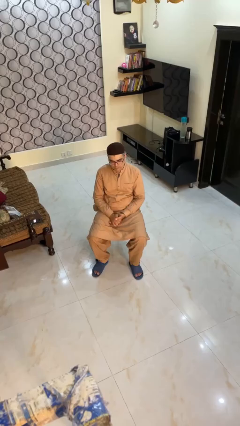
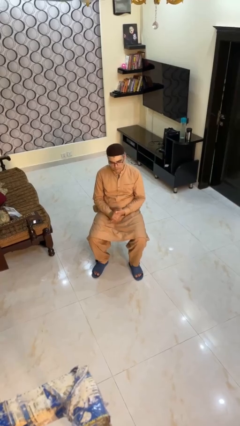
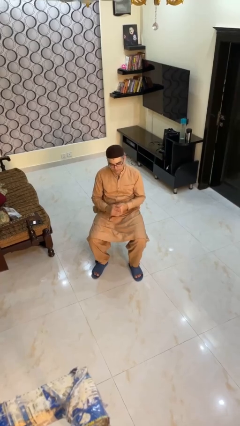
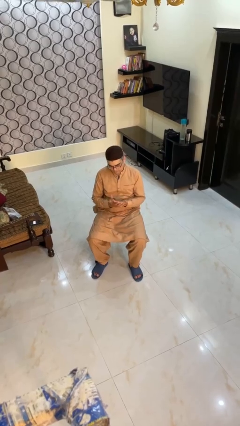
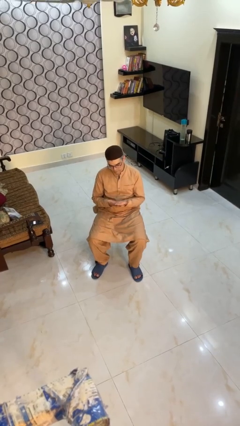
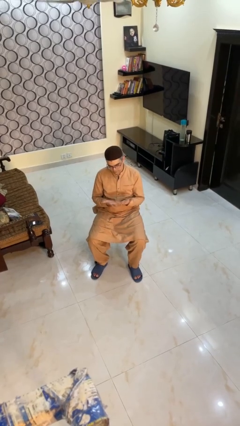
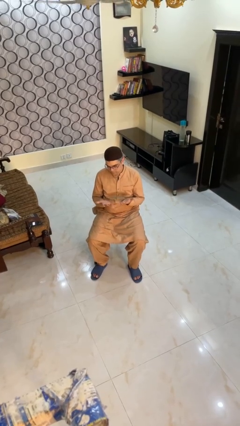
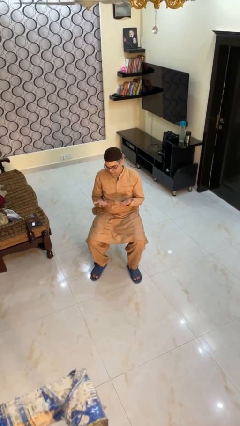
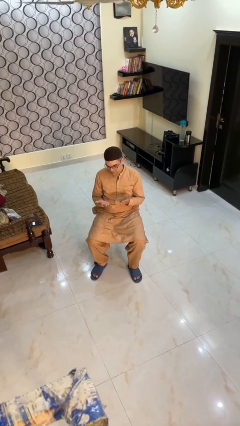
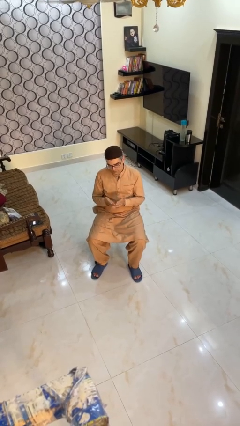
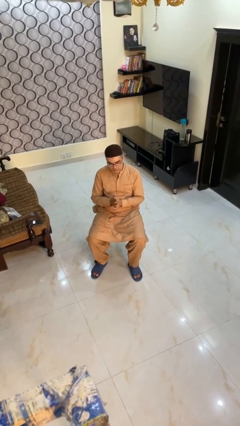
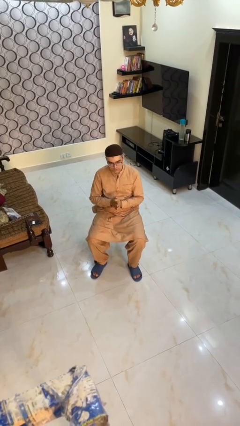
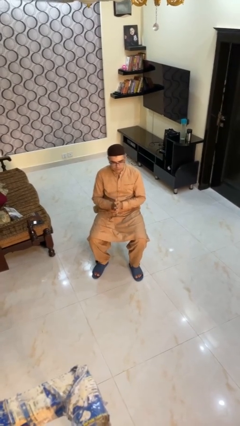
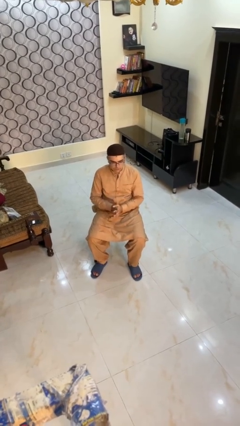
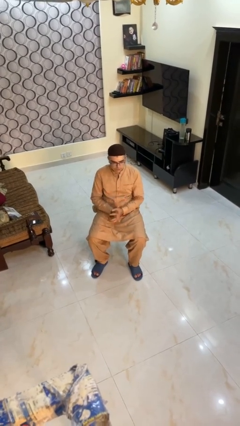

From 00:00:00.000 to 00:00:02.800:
person looks at hands in lap

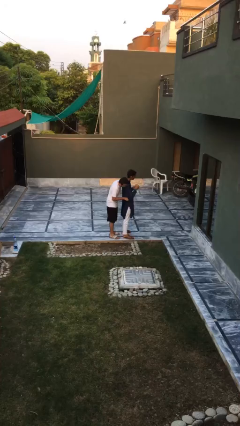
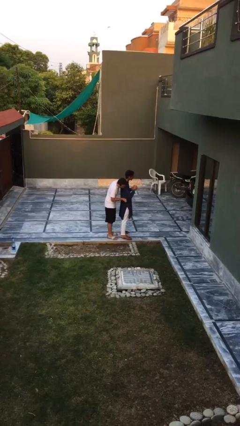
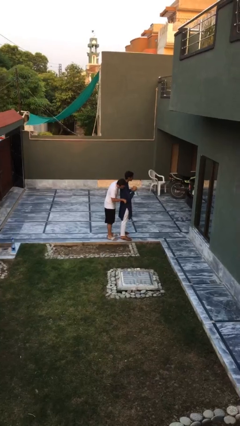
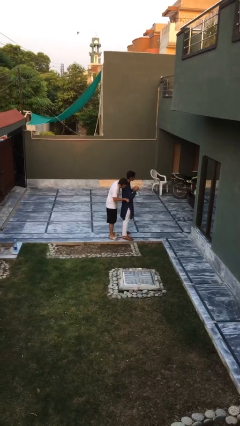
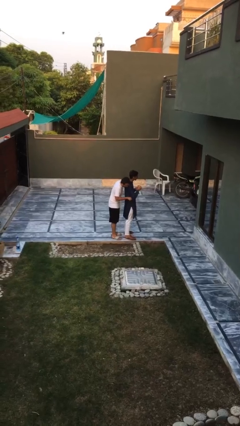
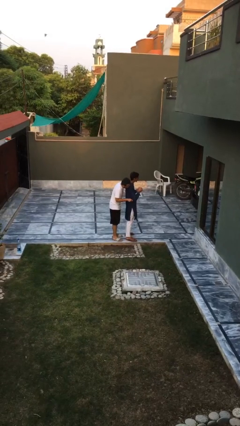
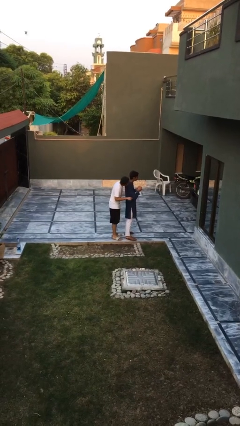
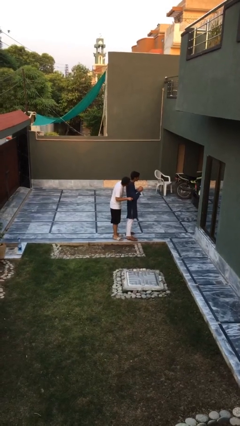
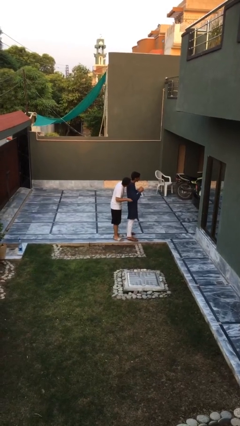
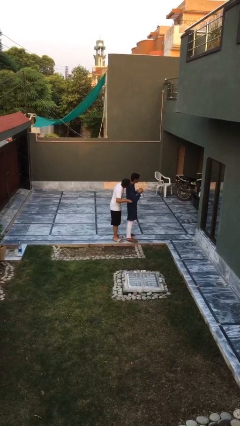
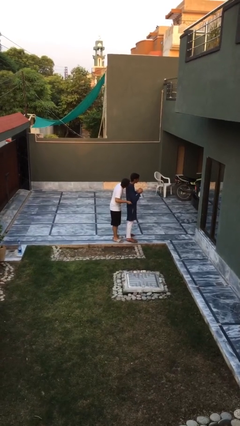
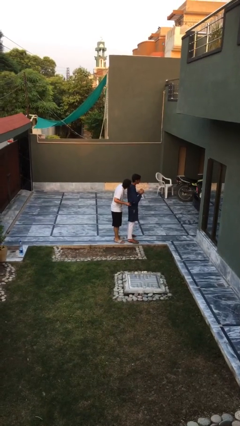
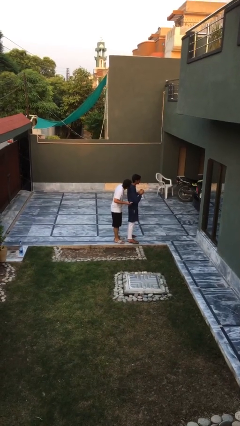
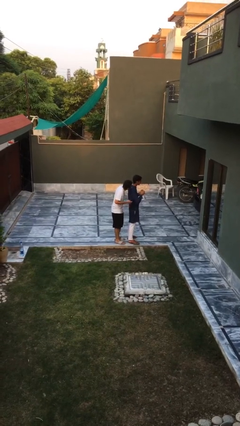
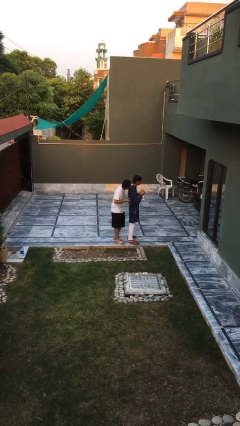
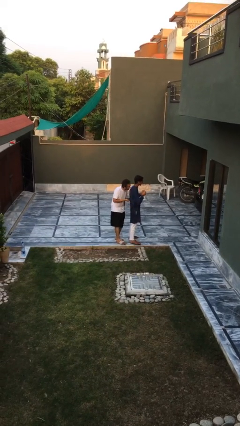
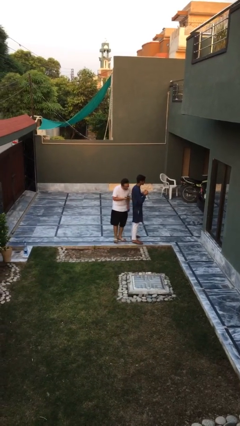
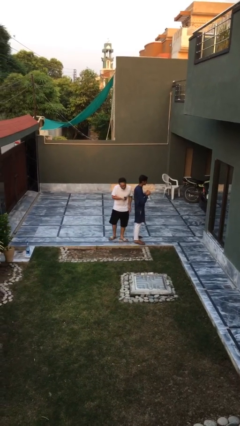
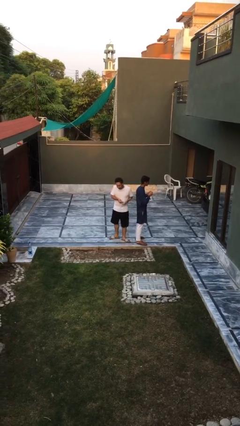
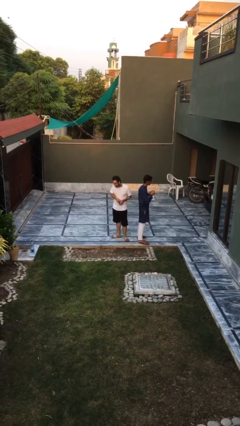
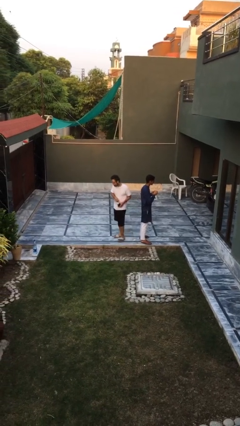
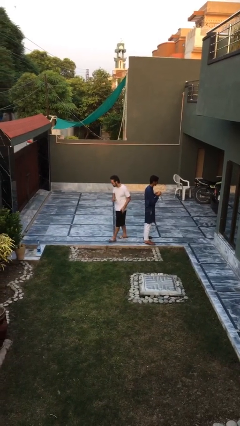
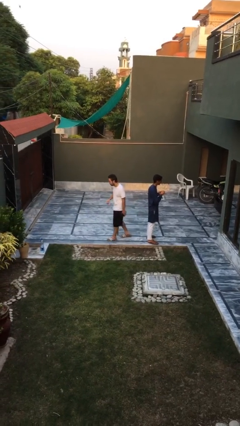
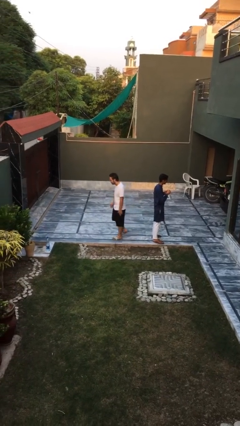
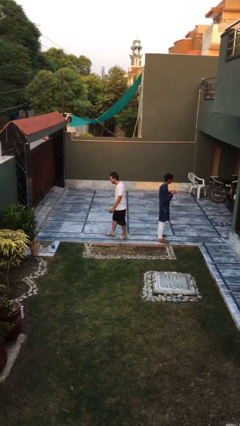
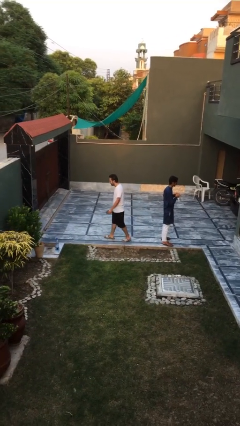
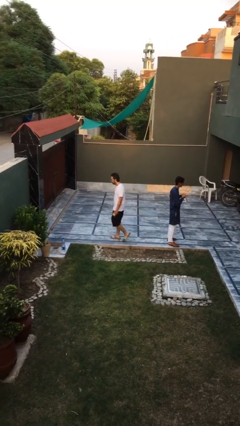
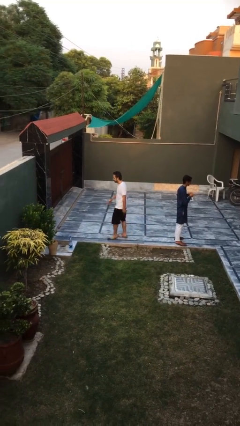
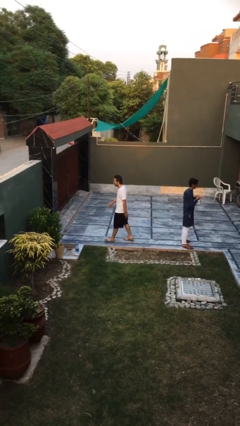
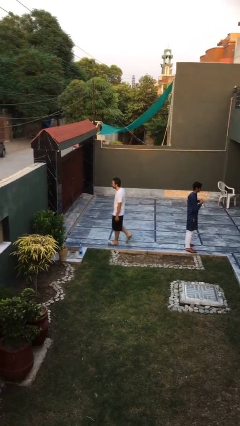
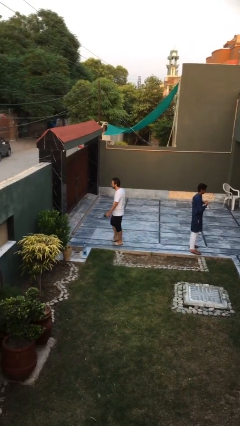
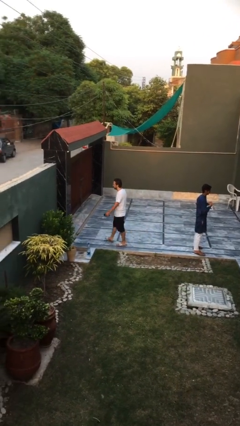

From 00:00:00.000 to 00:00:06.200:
person steals object from person

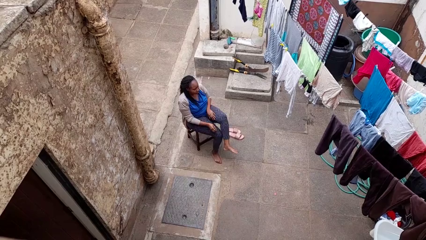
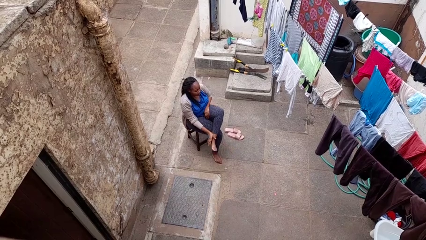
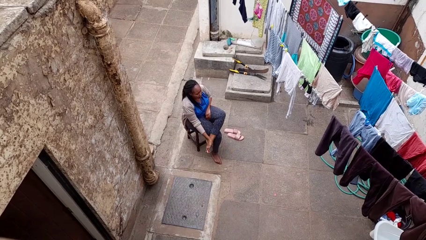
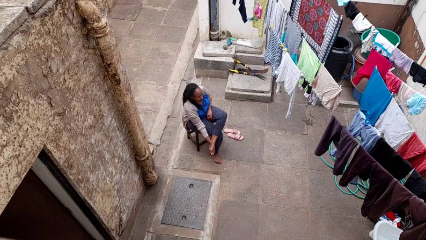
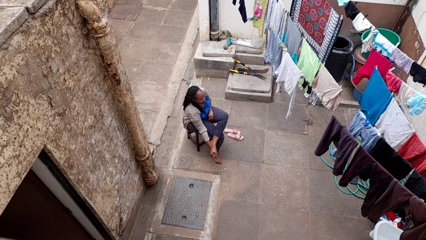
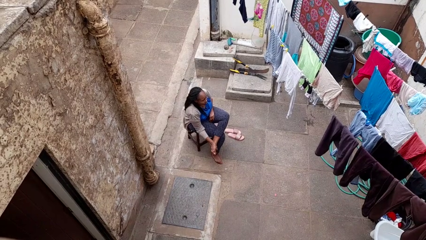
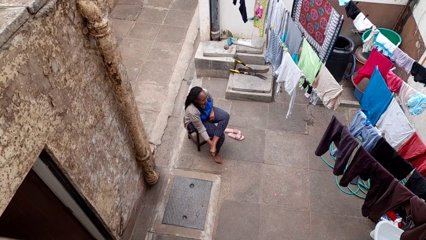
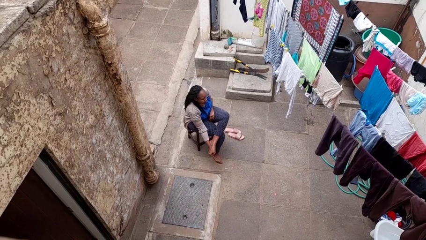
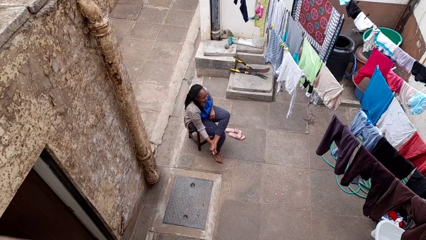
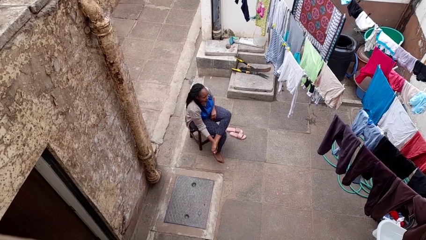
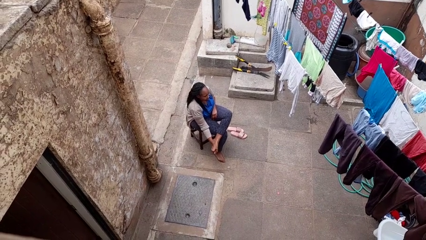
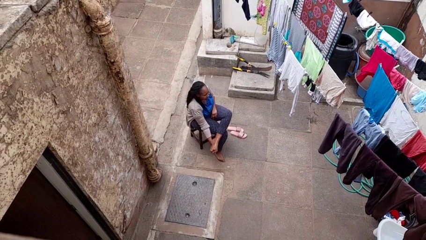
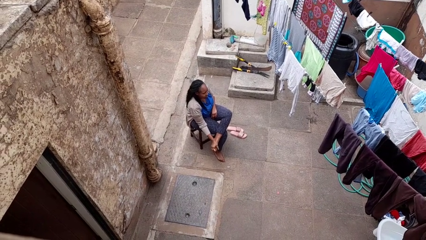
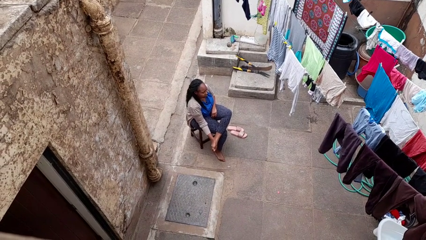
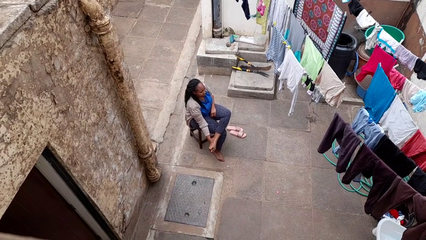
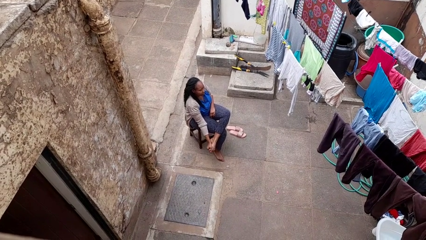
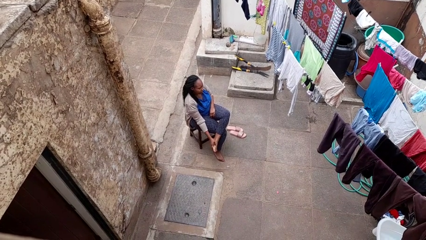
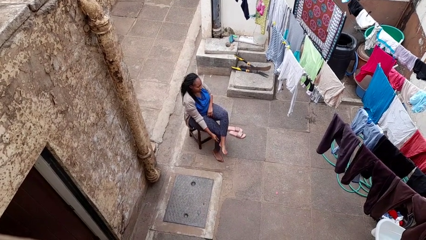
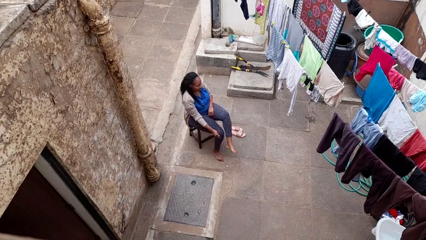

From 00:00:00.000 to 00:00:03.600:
person rubs foot

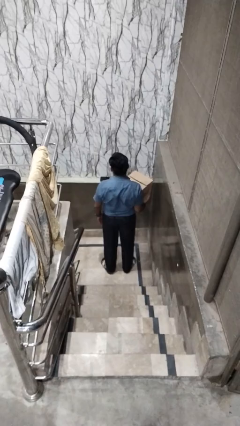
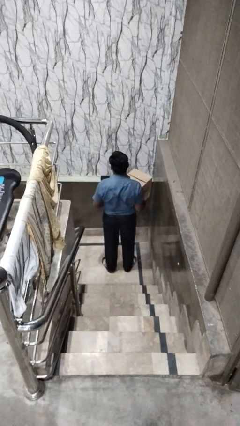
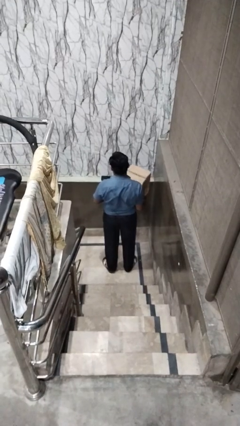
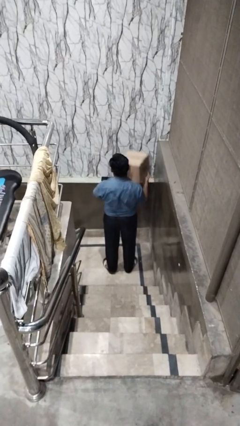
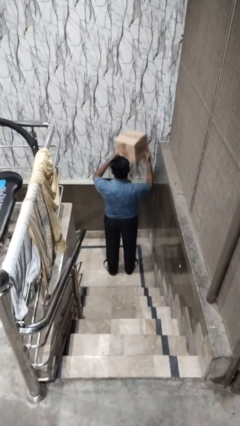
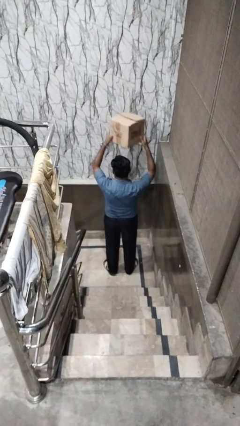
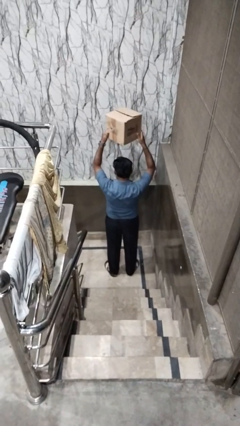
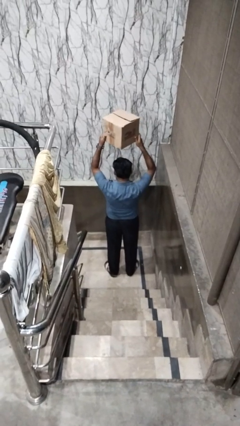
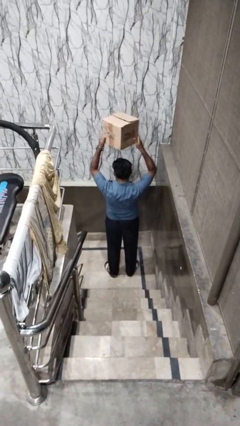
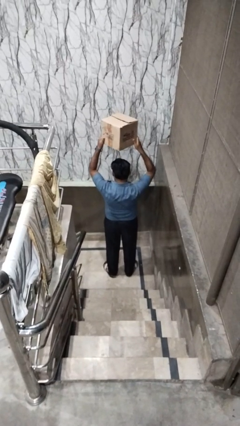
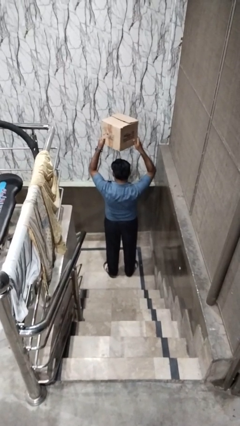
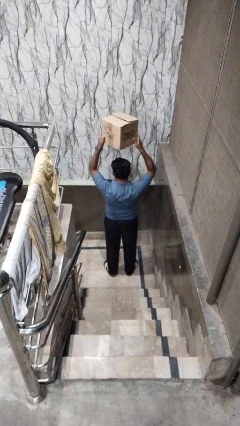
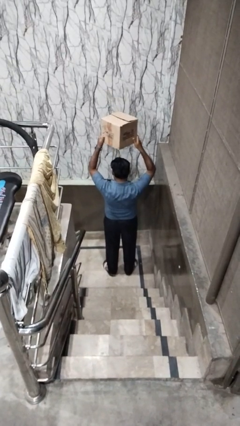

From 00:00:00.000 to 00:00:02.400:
person holds object above head

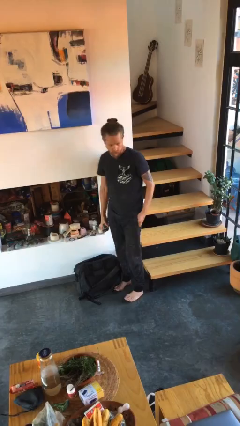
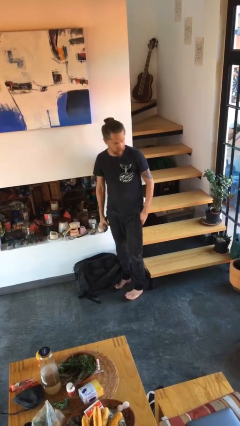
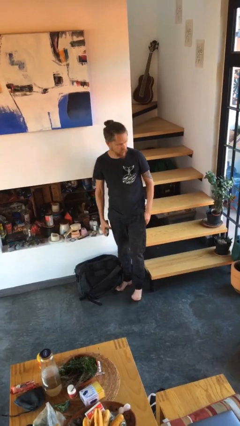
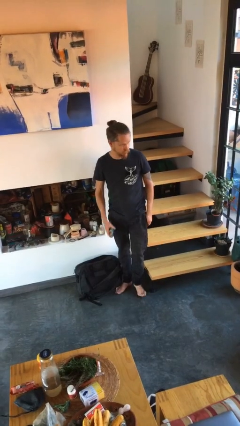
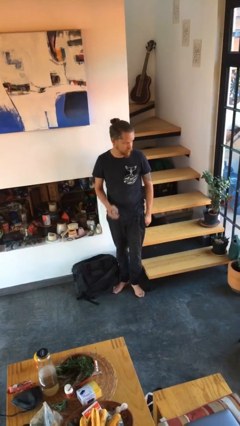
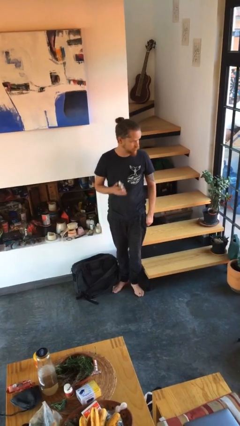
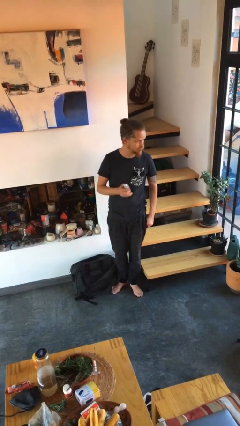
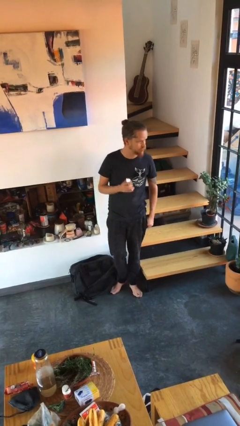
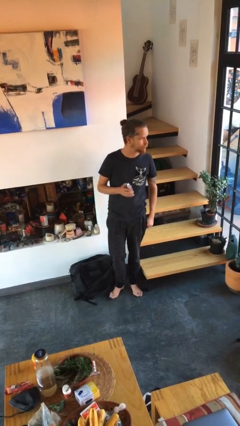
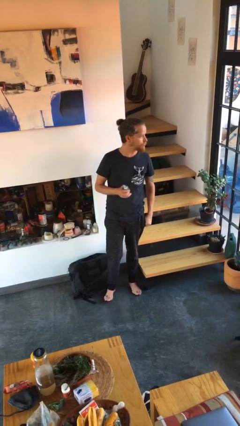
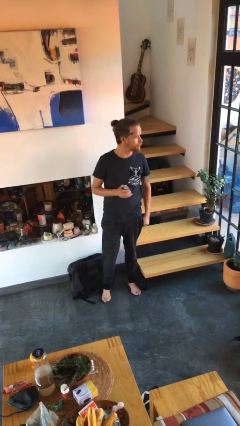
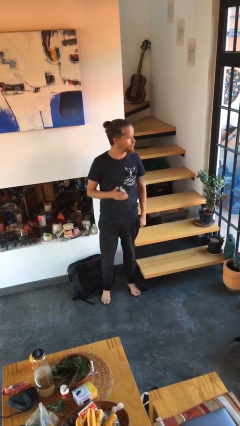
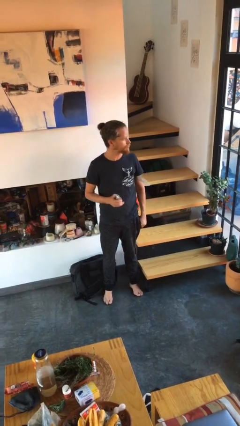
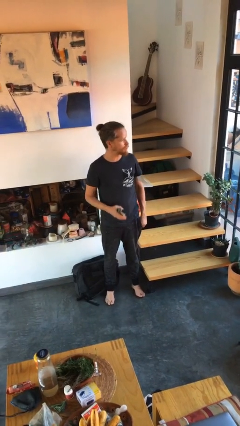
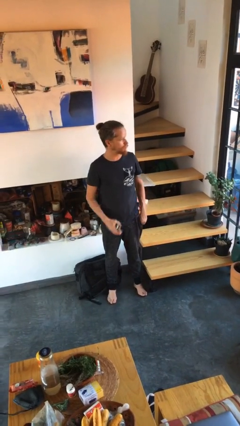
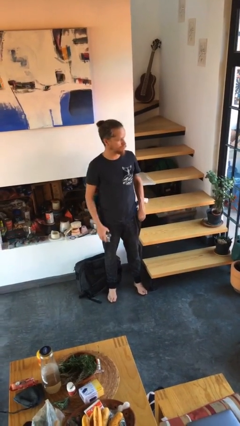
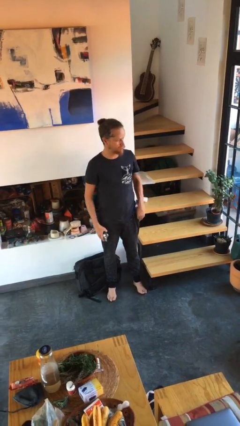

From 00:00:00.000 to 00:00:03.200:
person squeezes object
